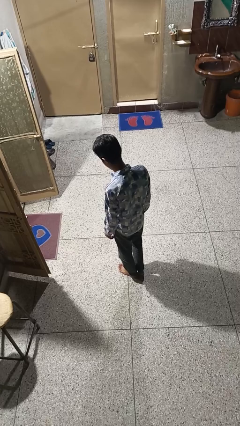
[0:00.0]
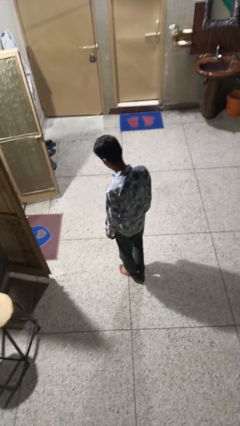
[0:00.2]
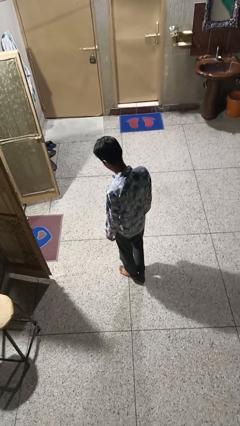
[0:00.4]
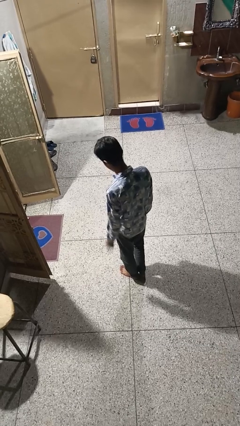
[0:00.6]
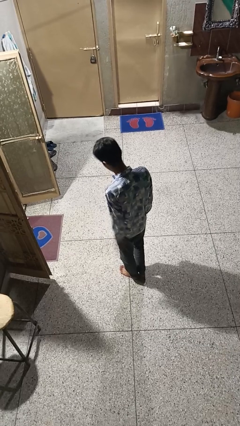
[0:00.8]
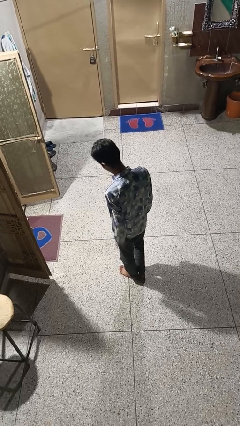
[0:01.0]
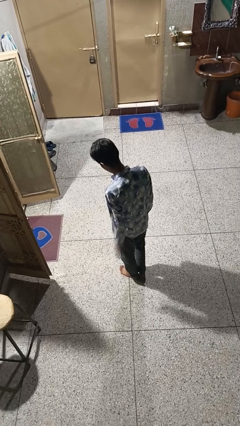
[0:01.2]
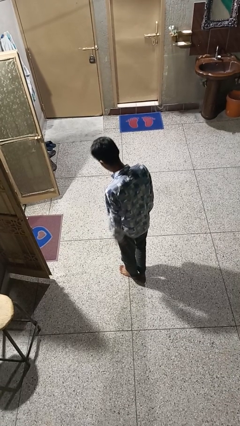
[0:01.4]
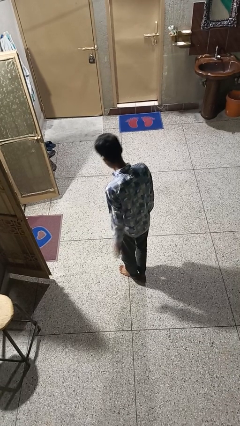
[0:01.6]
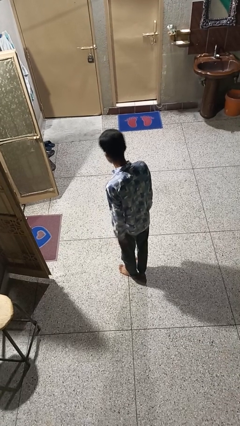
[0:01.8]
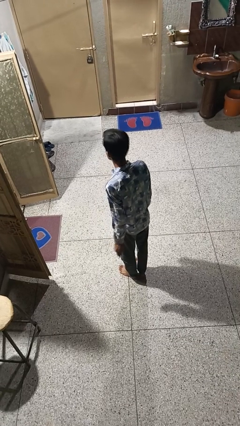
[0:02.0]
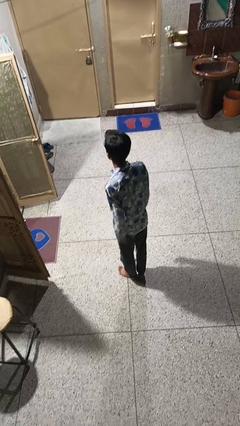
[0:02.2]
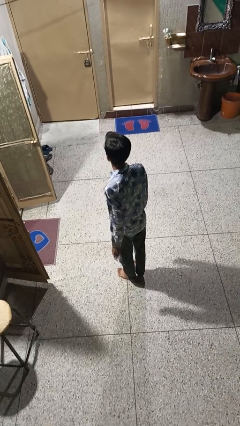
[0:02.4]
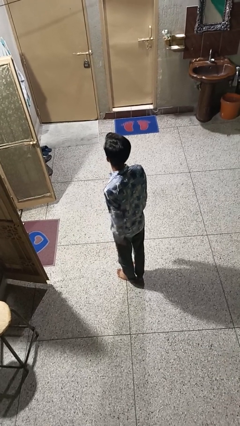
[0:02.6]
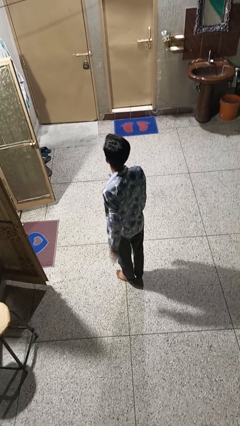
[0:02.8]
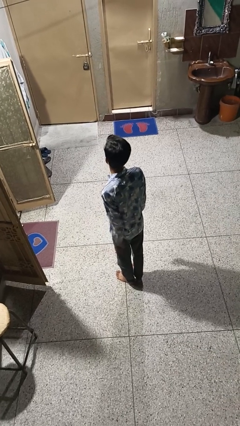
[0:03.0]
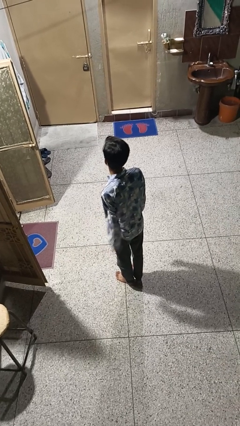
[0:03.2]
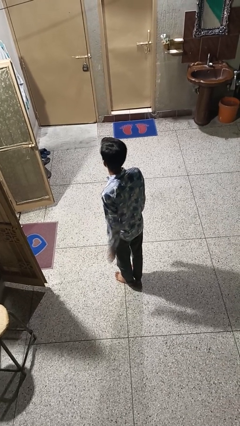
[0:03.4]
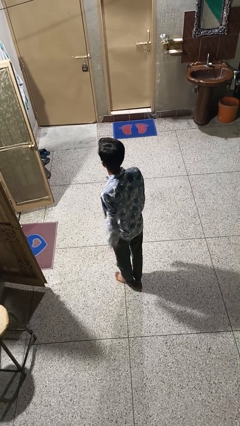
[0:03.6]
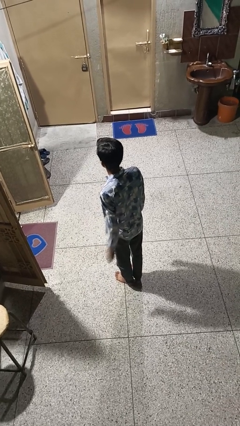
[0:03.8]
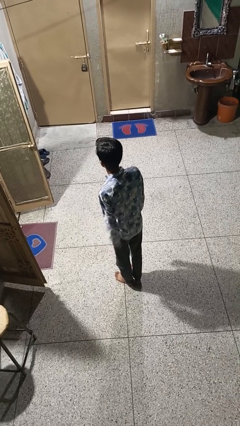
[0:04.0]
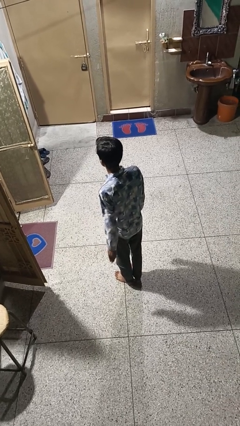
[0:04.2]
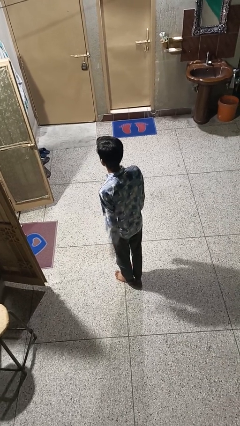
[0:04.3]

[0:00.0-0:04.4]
person slaps hands on thighs

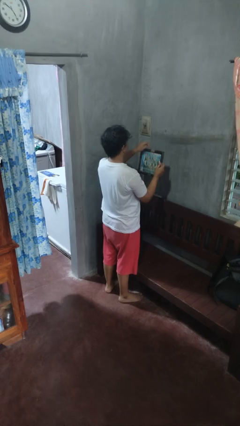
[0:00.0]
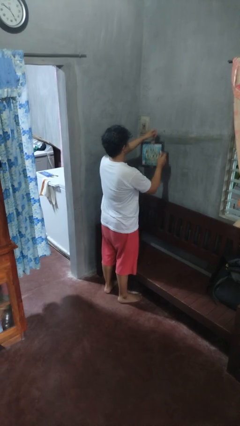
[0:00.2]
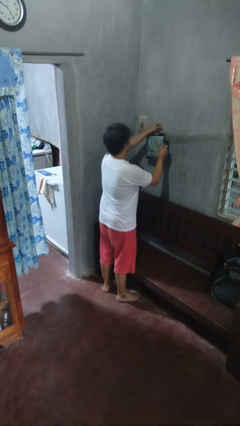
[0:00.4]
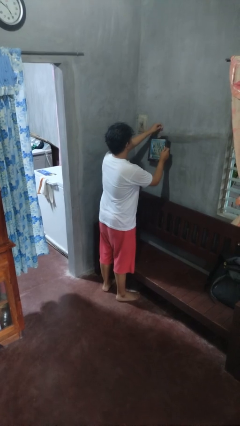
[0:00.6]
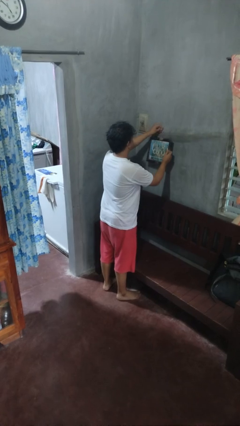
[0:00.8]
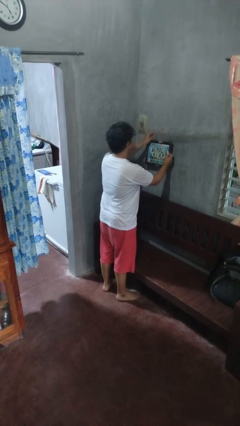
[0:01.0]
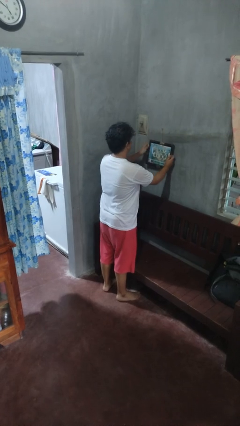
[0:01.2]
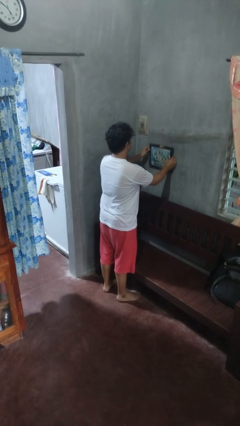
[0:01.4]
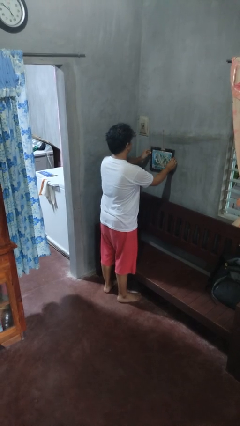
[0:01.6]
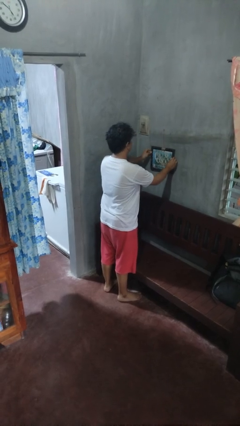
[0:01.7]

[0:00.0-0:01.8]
person puts up picture frame

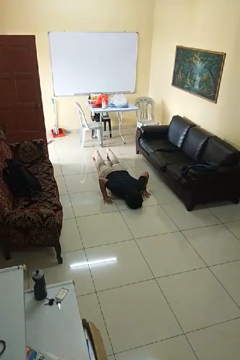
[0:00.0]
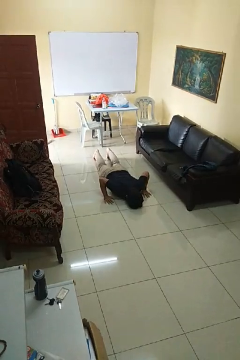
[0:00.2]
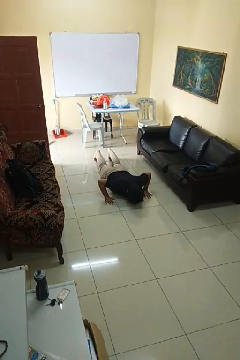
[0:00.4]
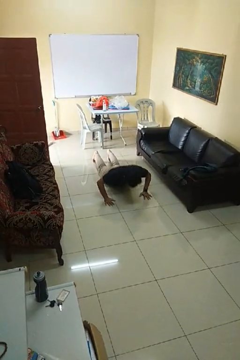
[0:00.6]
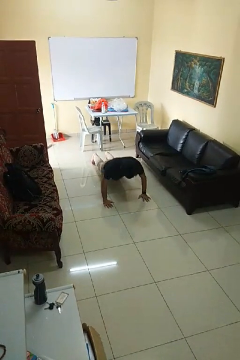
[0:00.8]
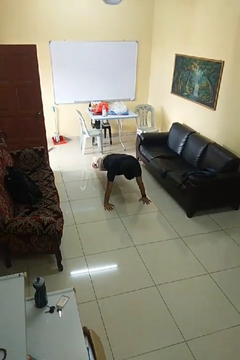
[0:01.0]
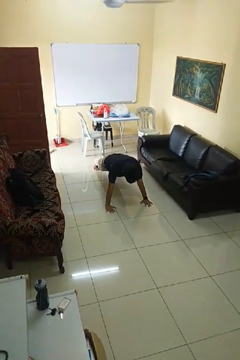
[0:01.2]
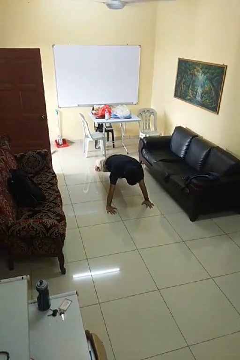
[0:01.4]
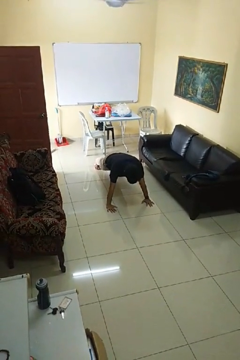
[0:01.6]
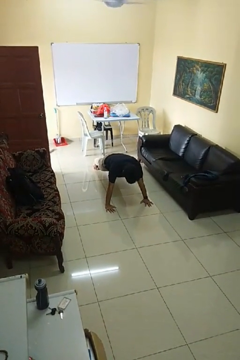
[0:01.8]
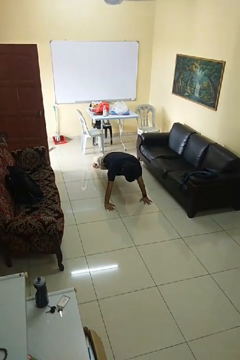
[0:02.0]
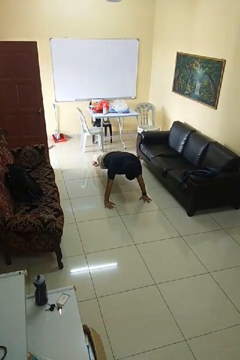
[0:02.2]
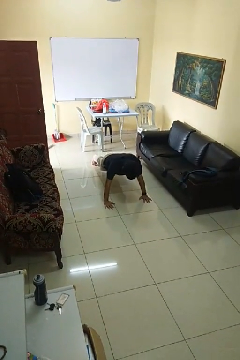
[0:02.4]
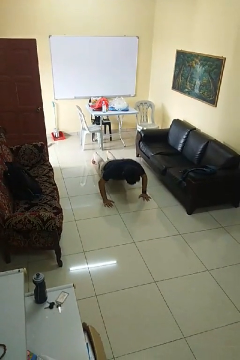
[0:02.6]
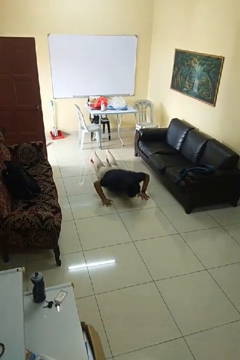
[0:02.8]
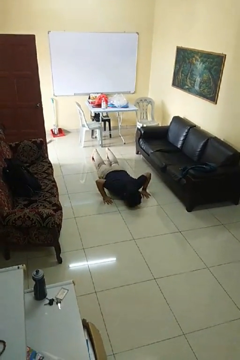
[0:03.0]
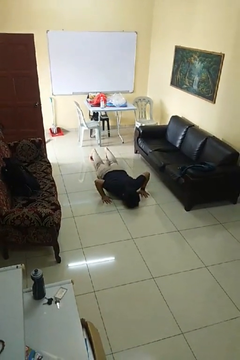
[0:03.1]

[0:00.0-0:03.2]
person exercises with pushup

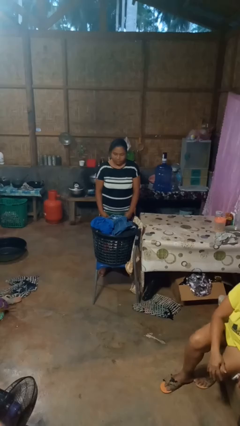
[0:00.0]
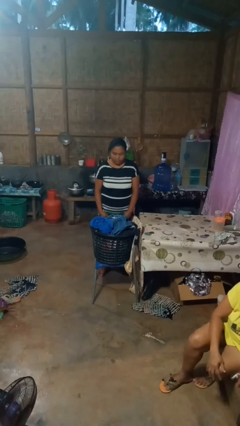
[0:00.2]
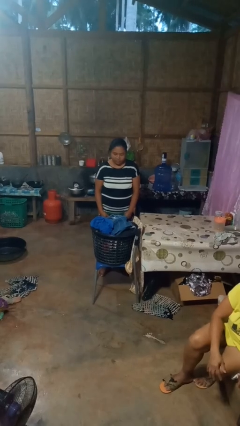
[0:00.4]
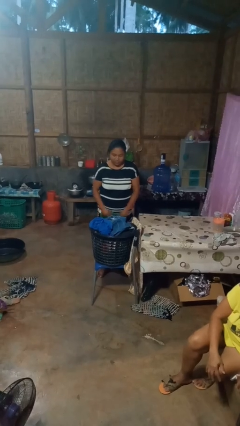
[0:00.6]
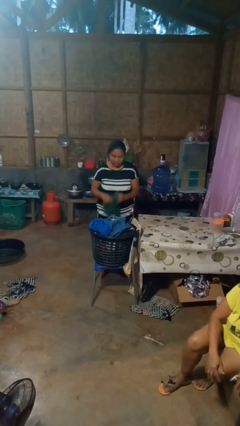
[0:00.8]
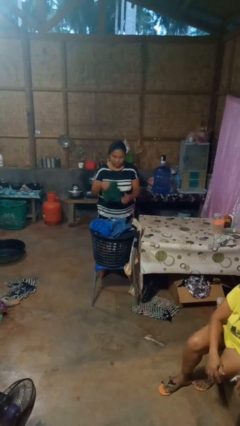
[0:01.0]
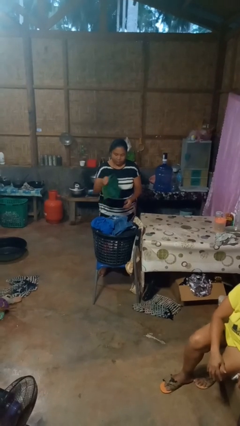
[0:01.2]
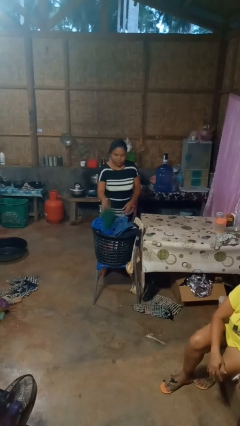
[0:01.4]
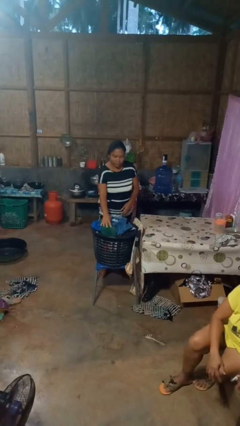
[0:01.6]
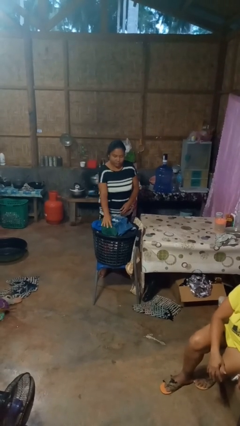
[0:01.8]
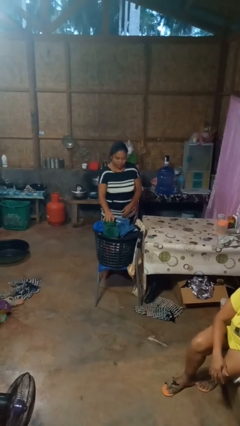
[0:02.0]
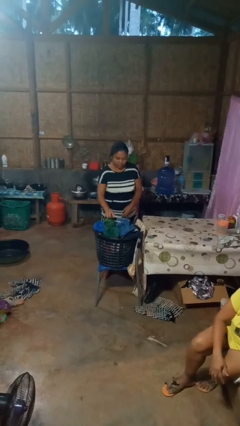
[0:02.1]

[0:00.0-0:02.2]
person puts object into basket

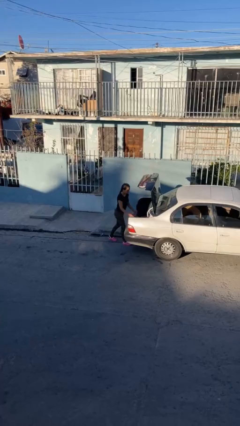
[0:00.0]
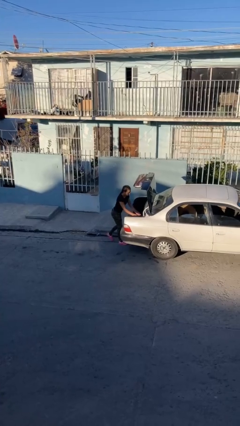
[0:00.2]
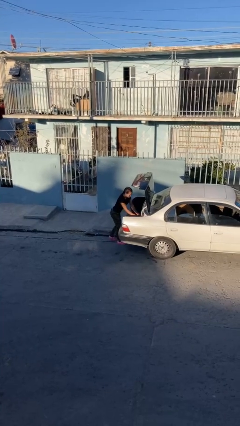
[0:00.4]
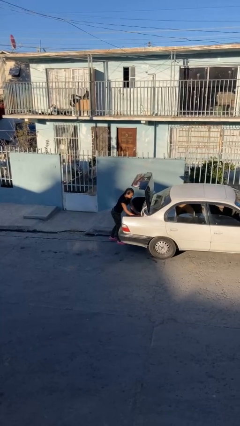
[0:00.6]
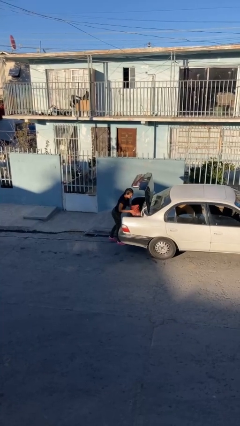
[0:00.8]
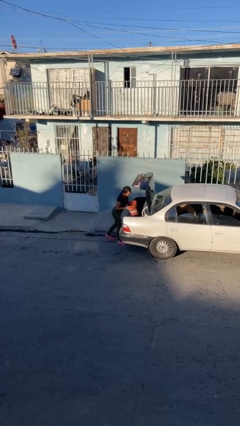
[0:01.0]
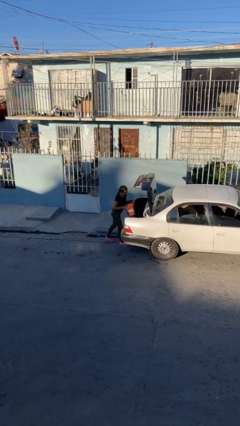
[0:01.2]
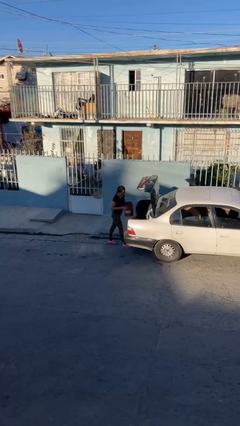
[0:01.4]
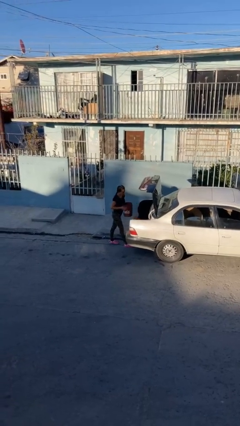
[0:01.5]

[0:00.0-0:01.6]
person unloads car

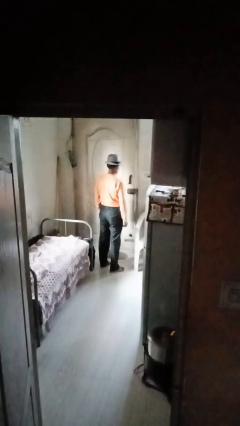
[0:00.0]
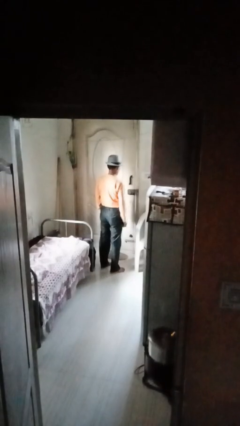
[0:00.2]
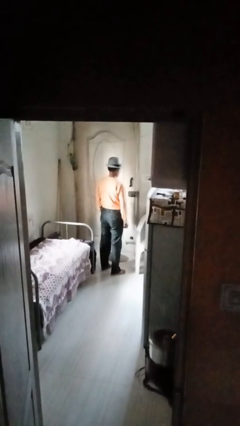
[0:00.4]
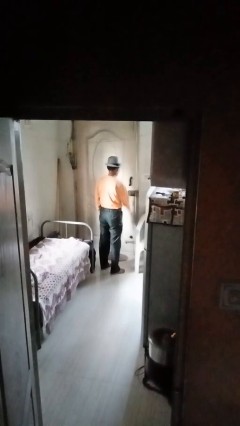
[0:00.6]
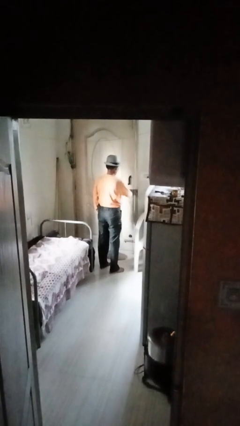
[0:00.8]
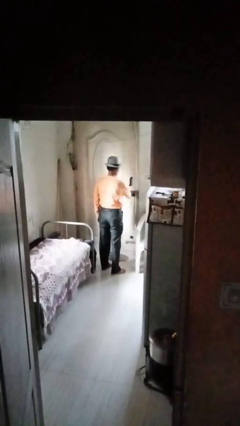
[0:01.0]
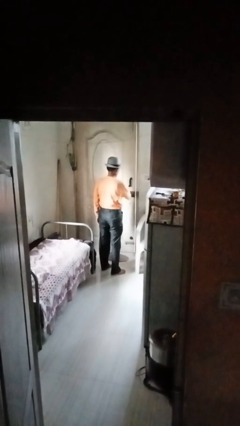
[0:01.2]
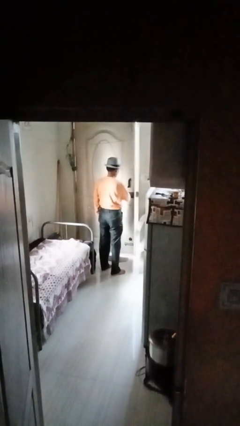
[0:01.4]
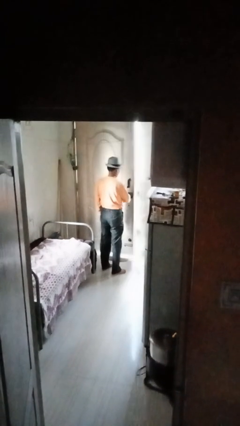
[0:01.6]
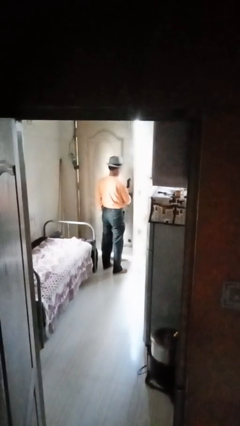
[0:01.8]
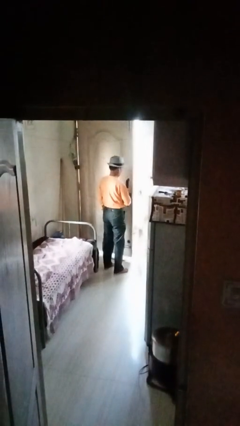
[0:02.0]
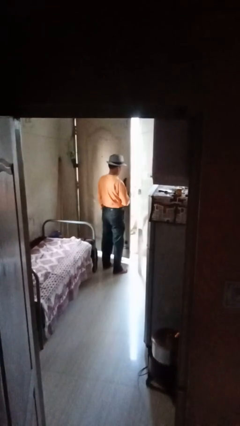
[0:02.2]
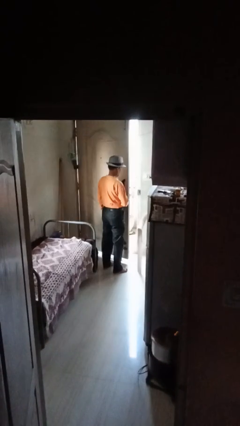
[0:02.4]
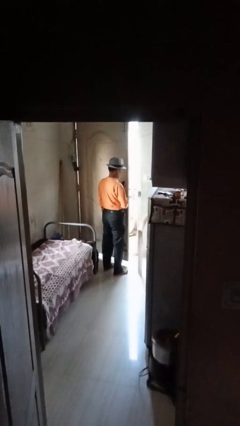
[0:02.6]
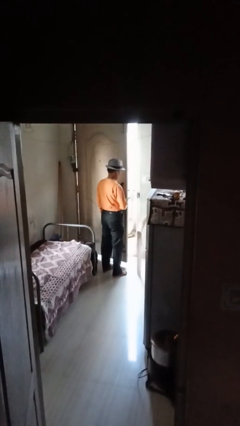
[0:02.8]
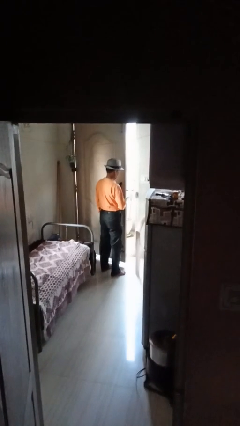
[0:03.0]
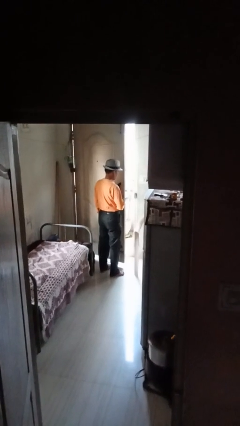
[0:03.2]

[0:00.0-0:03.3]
person opens facility door

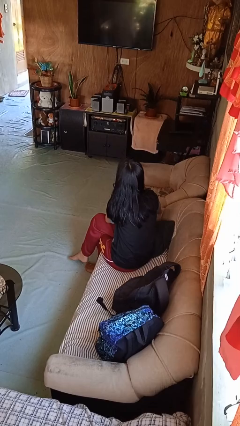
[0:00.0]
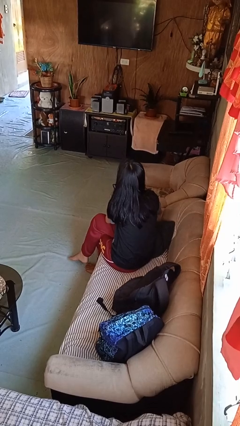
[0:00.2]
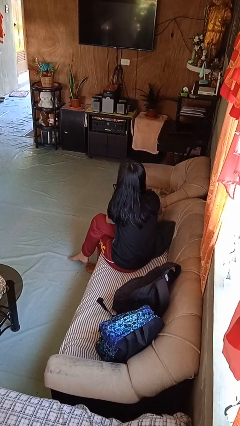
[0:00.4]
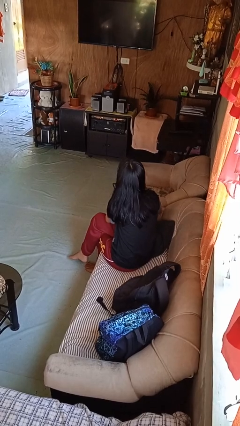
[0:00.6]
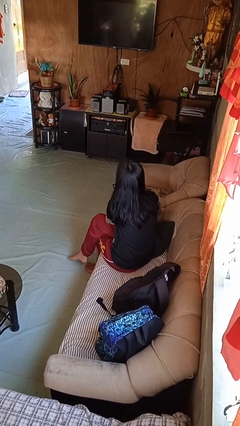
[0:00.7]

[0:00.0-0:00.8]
person uses television remote

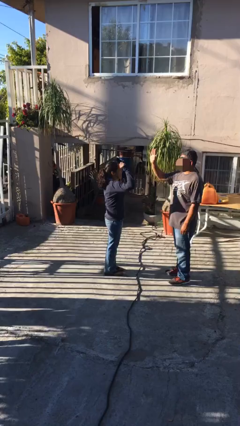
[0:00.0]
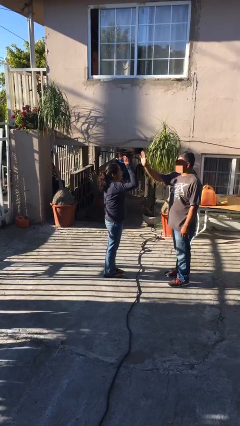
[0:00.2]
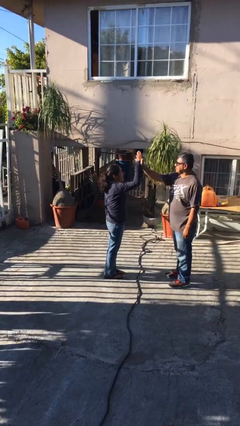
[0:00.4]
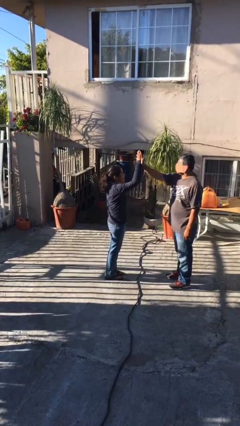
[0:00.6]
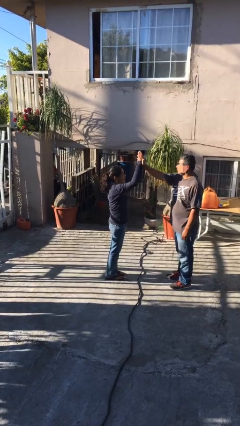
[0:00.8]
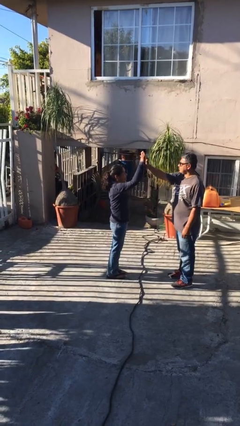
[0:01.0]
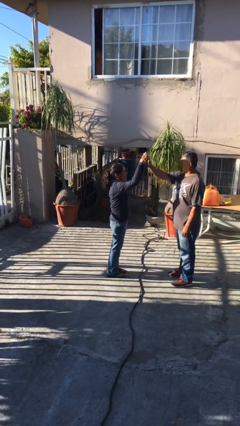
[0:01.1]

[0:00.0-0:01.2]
person highfives hand
